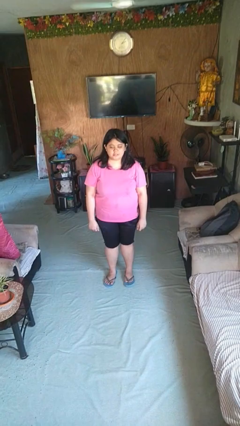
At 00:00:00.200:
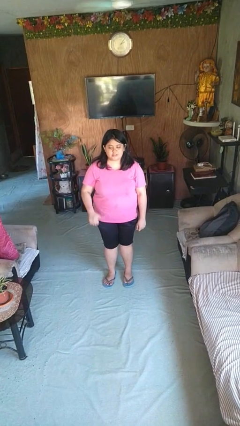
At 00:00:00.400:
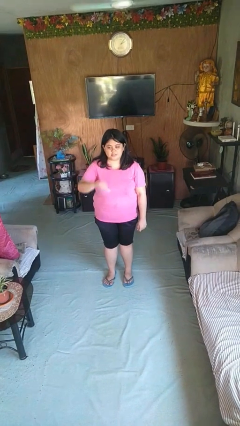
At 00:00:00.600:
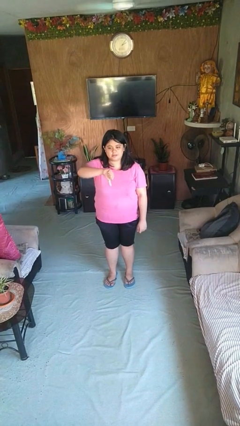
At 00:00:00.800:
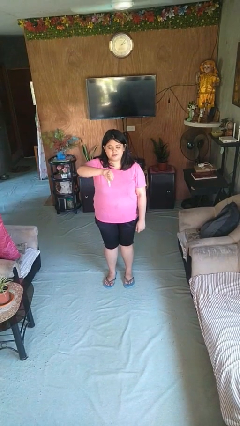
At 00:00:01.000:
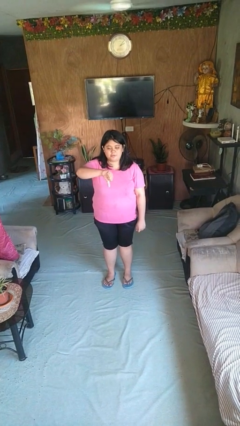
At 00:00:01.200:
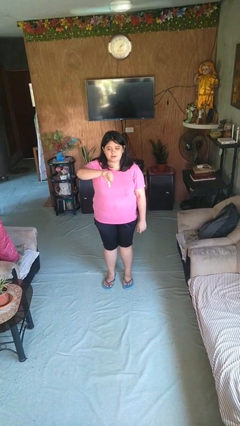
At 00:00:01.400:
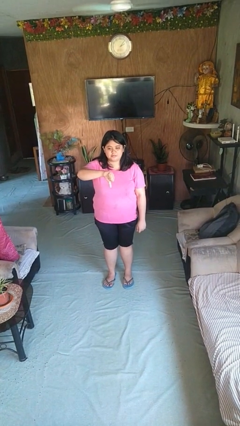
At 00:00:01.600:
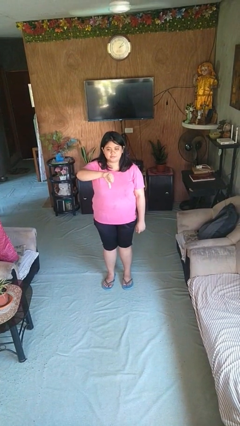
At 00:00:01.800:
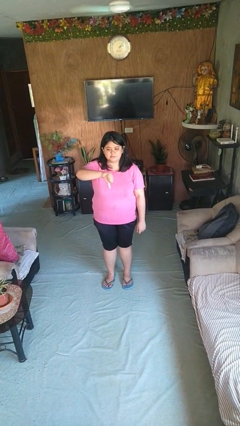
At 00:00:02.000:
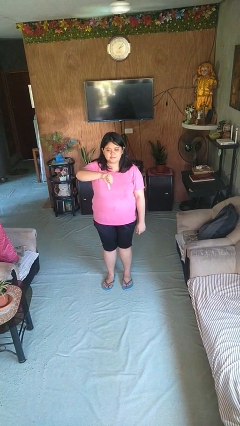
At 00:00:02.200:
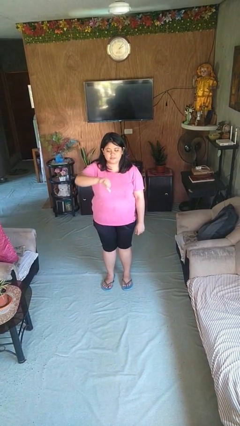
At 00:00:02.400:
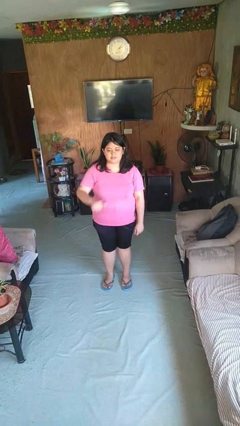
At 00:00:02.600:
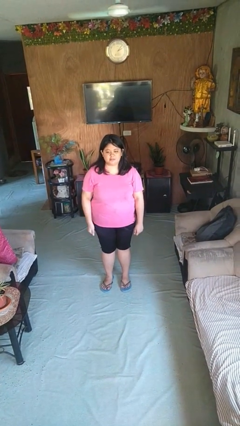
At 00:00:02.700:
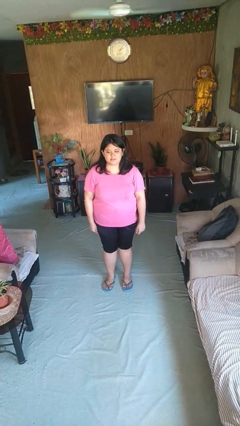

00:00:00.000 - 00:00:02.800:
person gestures thumbs down

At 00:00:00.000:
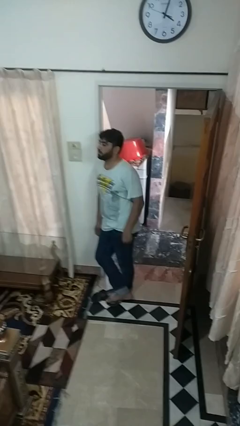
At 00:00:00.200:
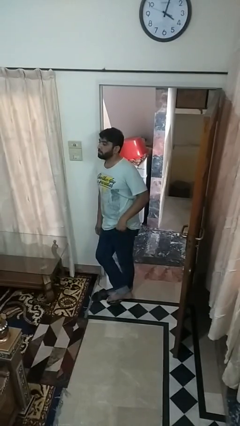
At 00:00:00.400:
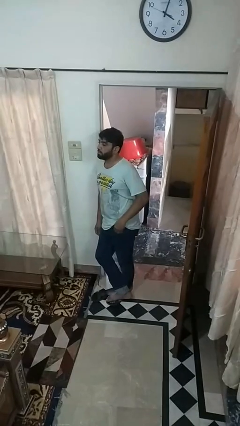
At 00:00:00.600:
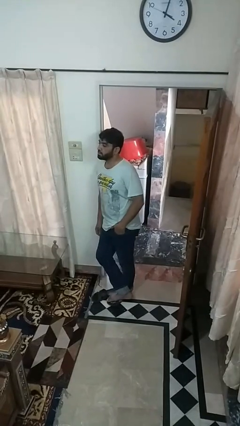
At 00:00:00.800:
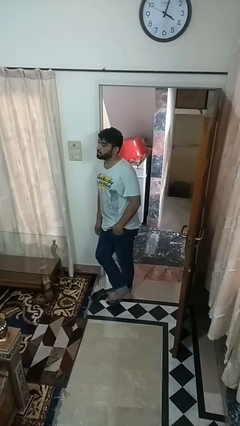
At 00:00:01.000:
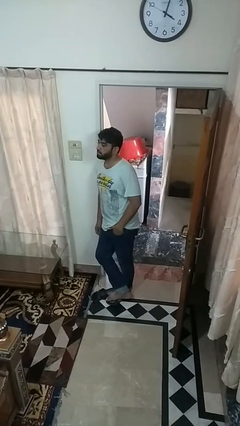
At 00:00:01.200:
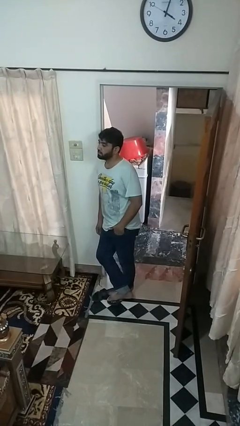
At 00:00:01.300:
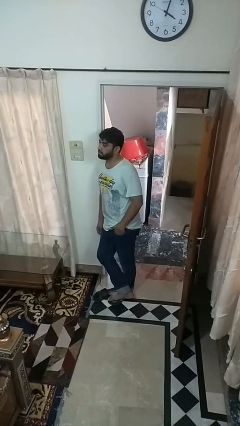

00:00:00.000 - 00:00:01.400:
person puts hands in back pockets

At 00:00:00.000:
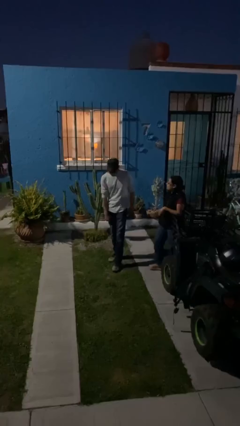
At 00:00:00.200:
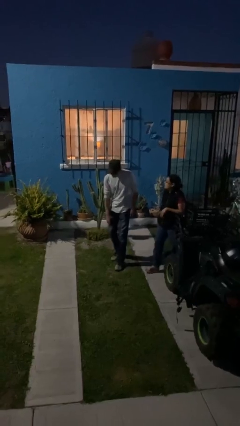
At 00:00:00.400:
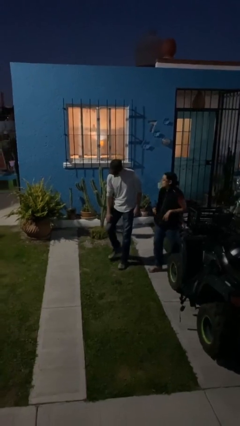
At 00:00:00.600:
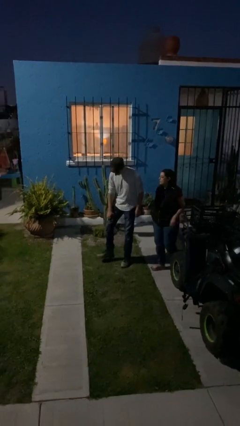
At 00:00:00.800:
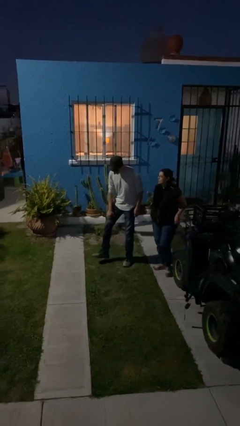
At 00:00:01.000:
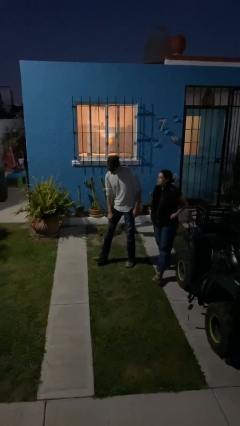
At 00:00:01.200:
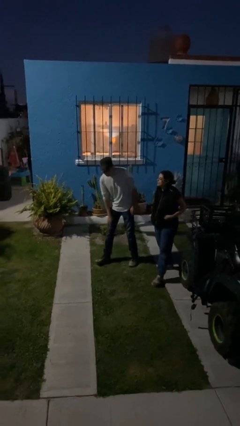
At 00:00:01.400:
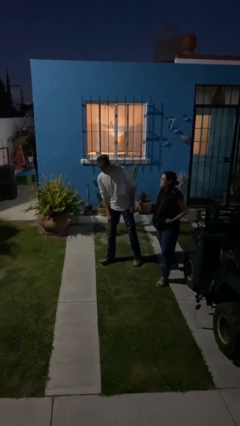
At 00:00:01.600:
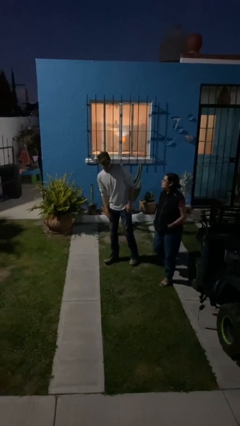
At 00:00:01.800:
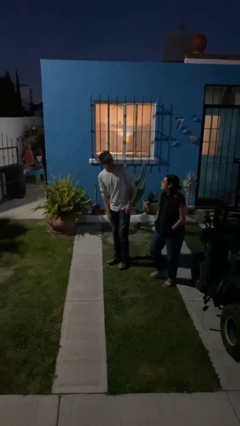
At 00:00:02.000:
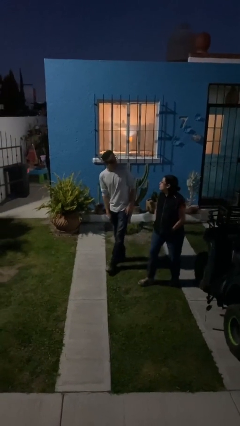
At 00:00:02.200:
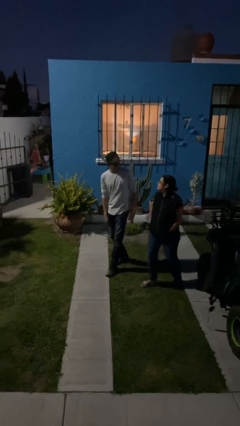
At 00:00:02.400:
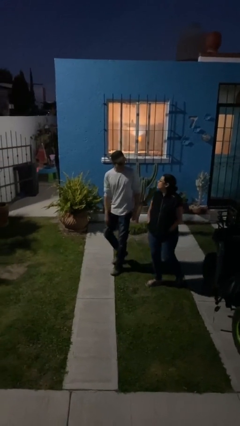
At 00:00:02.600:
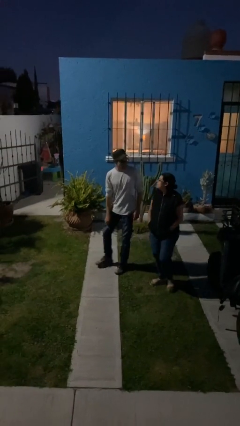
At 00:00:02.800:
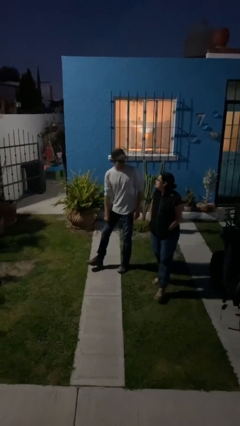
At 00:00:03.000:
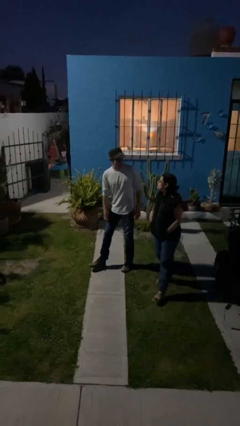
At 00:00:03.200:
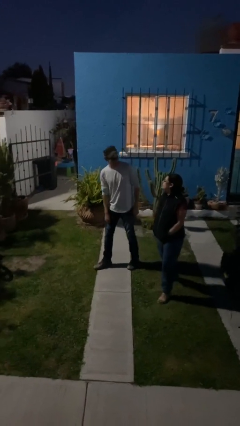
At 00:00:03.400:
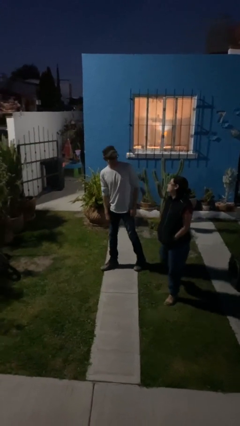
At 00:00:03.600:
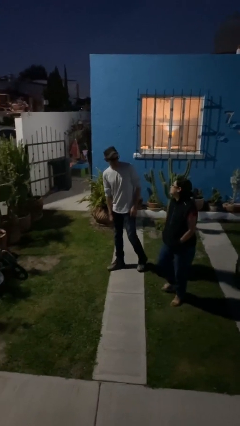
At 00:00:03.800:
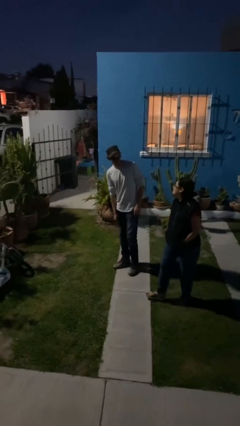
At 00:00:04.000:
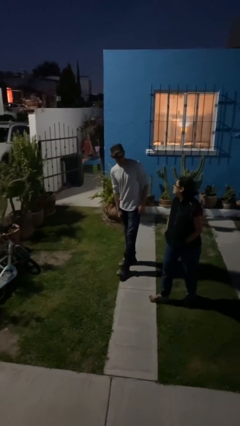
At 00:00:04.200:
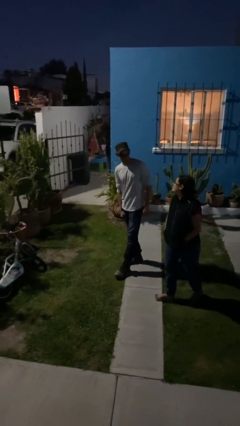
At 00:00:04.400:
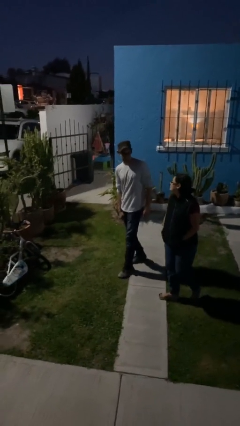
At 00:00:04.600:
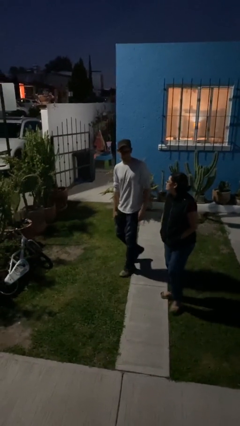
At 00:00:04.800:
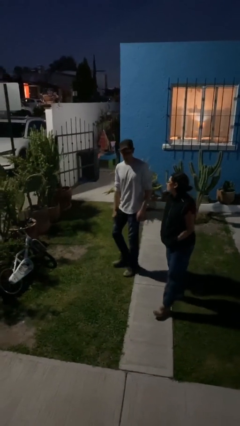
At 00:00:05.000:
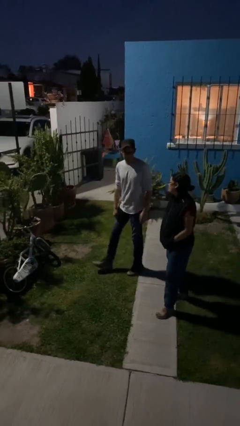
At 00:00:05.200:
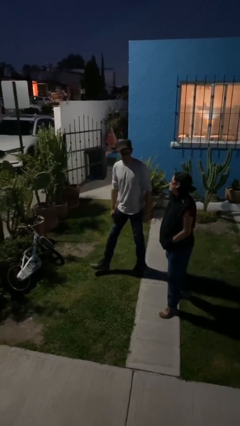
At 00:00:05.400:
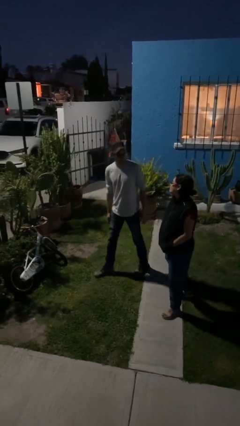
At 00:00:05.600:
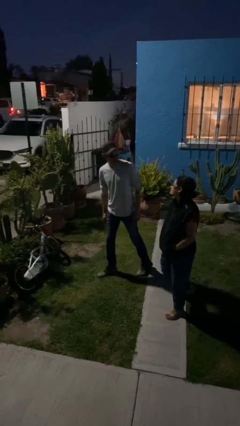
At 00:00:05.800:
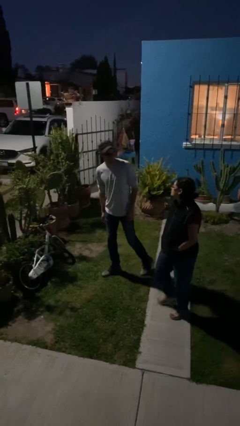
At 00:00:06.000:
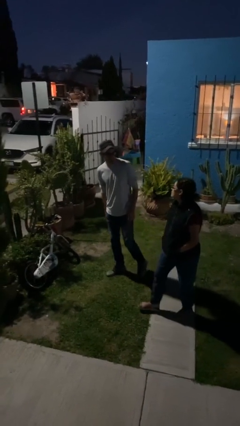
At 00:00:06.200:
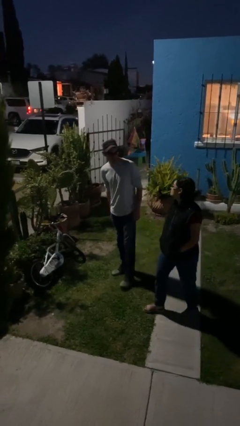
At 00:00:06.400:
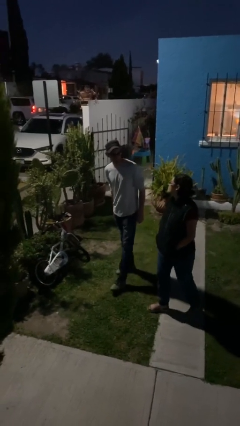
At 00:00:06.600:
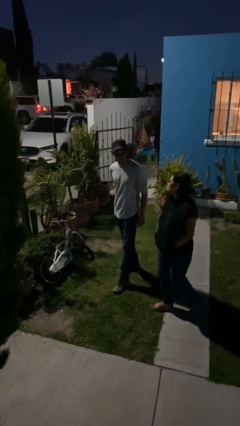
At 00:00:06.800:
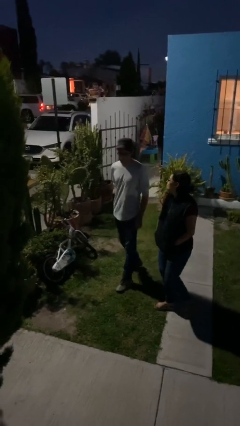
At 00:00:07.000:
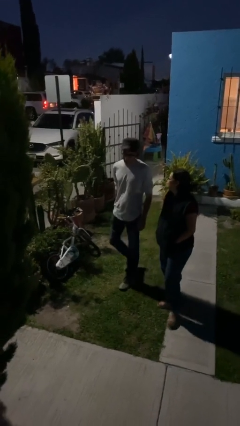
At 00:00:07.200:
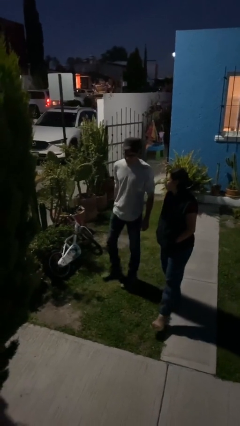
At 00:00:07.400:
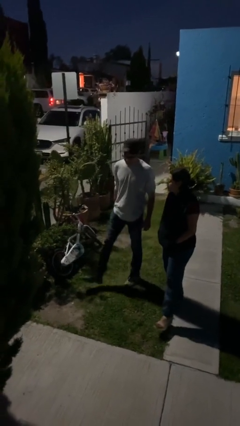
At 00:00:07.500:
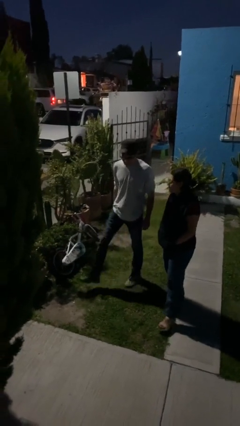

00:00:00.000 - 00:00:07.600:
person talks to person

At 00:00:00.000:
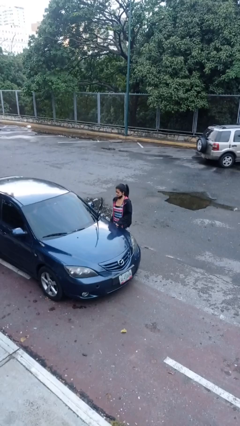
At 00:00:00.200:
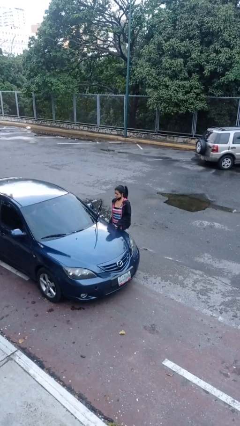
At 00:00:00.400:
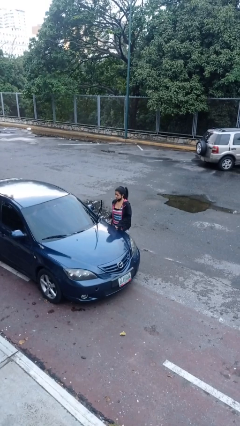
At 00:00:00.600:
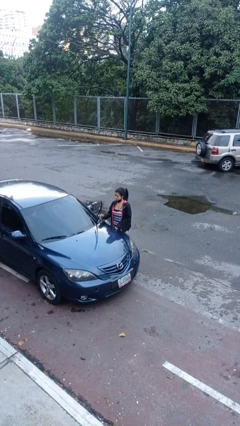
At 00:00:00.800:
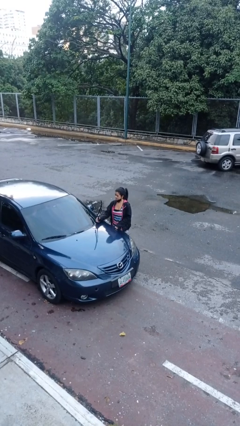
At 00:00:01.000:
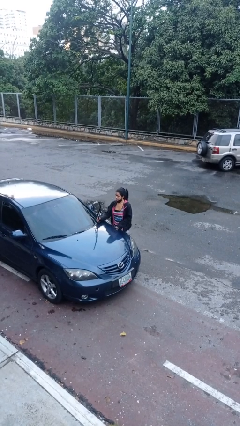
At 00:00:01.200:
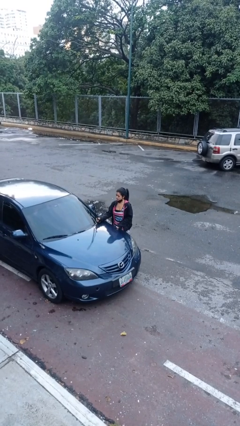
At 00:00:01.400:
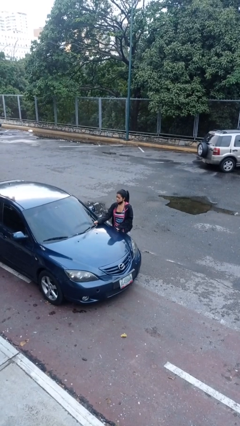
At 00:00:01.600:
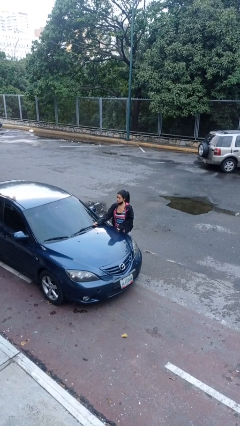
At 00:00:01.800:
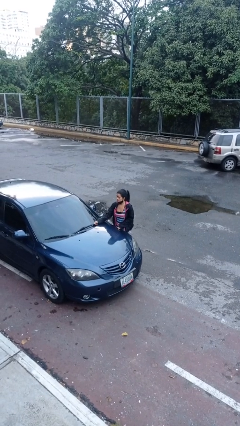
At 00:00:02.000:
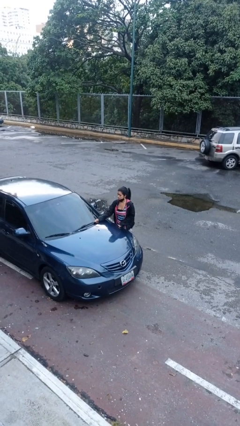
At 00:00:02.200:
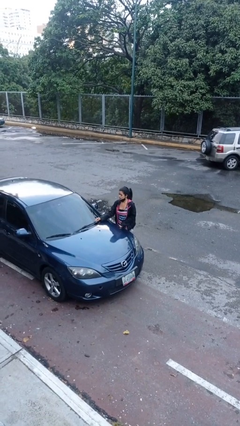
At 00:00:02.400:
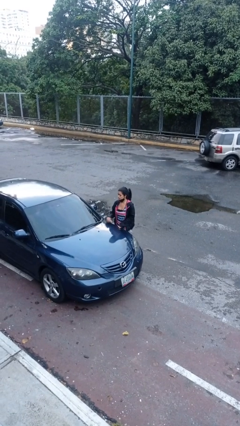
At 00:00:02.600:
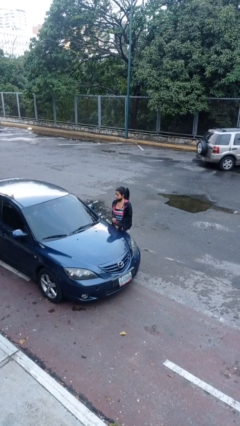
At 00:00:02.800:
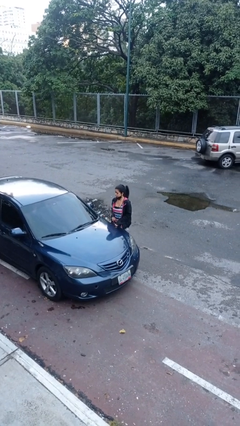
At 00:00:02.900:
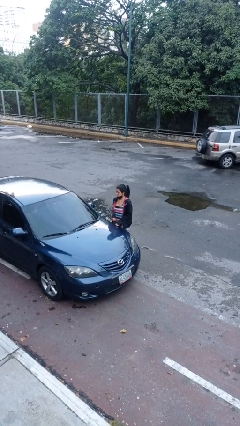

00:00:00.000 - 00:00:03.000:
person flips down car wipers

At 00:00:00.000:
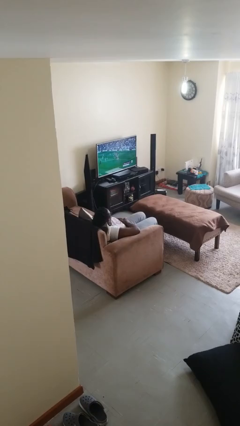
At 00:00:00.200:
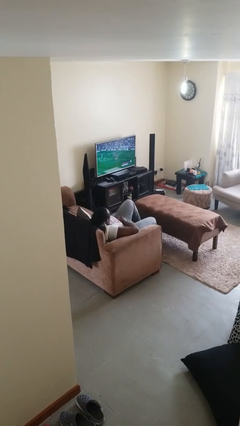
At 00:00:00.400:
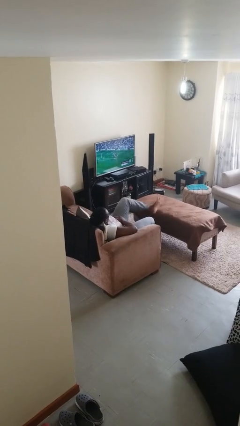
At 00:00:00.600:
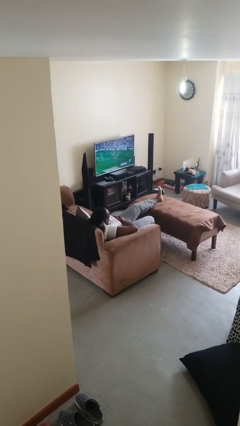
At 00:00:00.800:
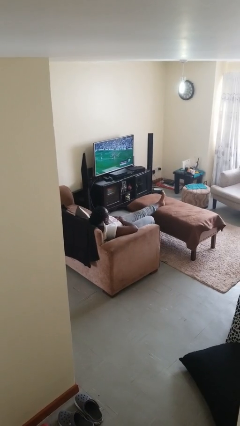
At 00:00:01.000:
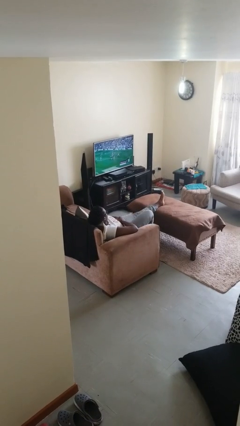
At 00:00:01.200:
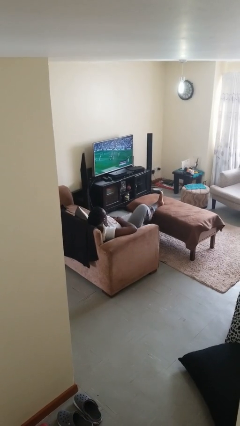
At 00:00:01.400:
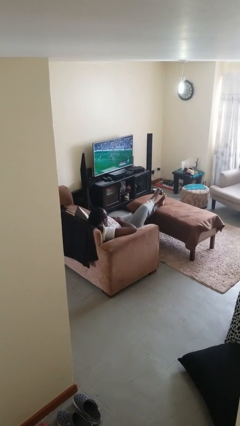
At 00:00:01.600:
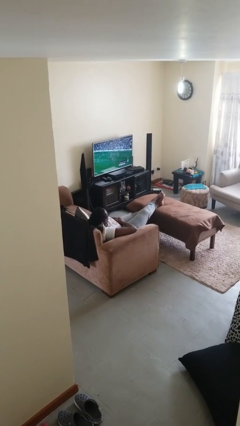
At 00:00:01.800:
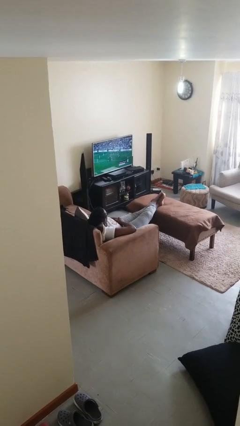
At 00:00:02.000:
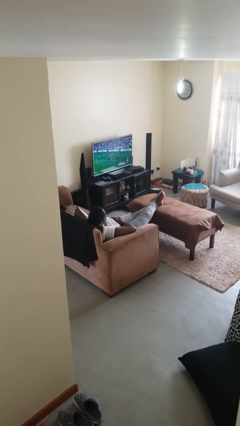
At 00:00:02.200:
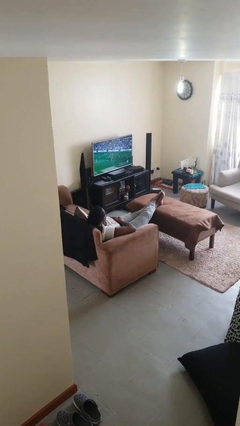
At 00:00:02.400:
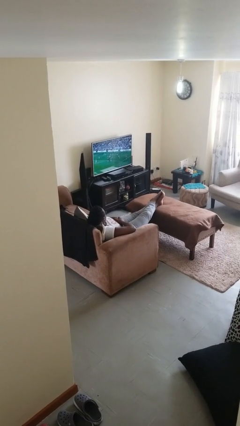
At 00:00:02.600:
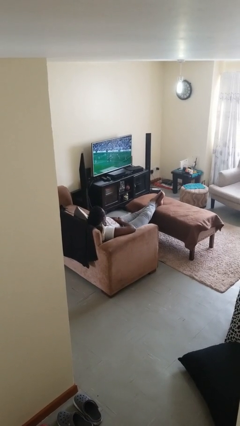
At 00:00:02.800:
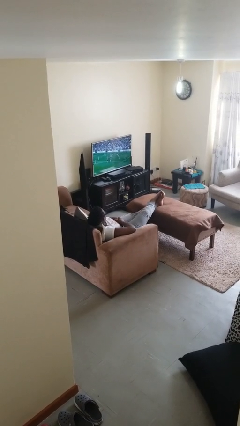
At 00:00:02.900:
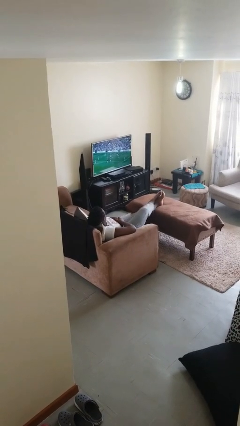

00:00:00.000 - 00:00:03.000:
person puts feet up
